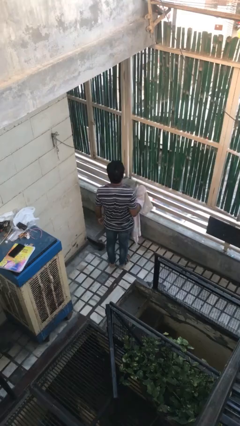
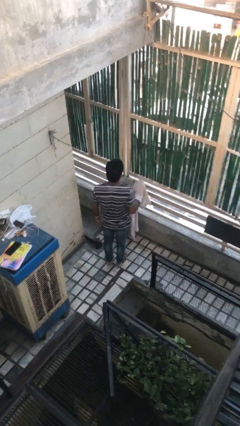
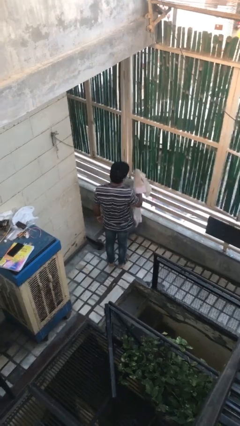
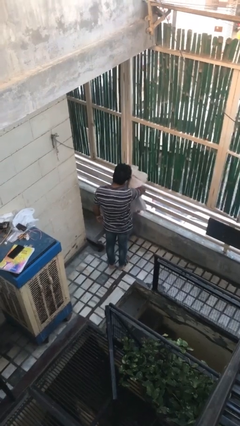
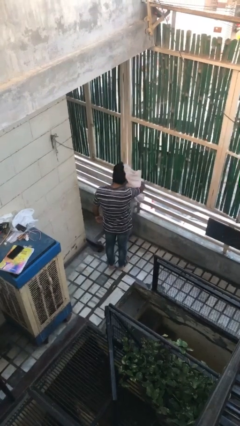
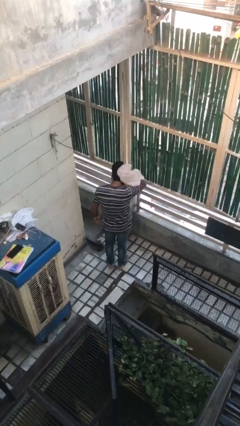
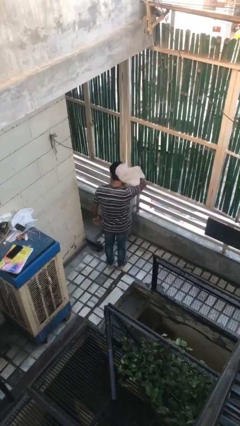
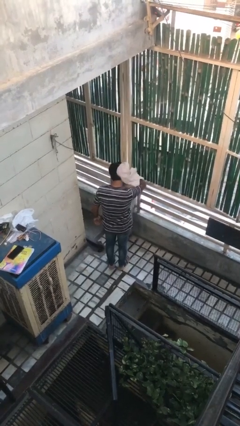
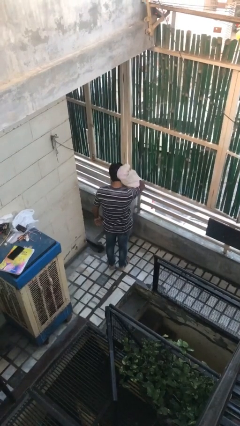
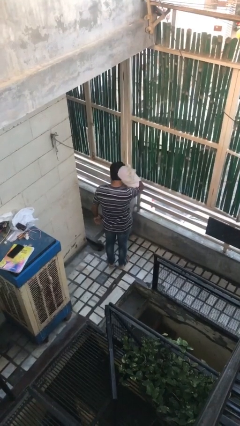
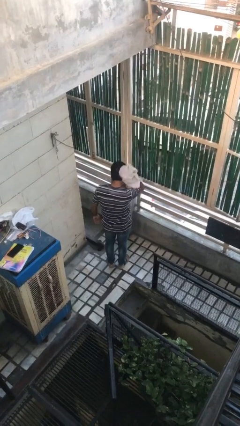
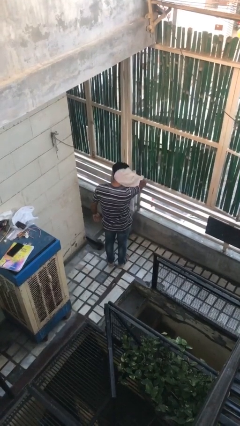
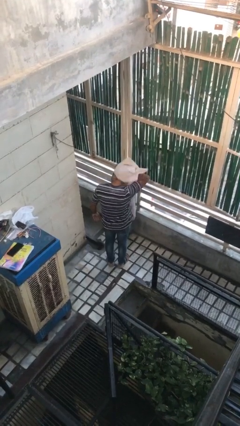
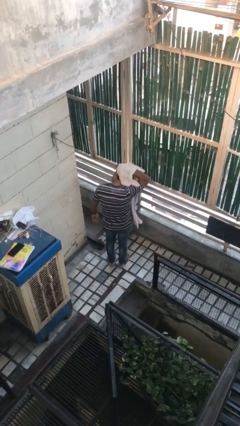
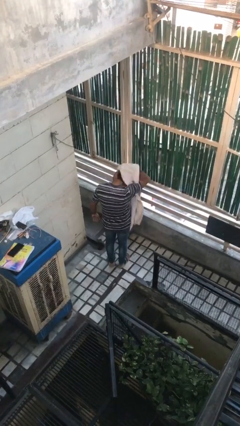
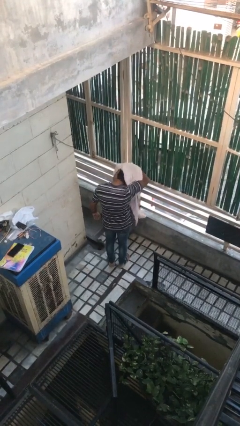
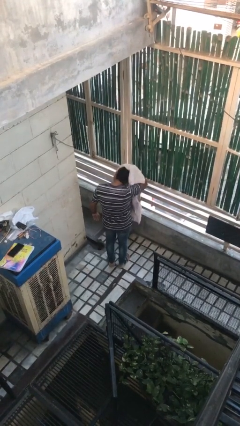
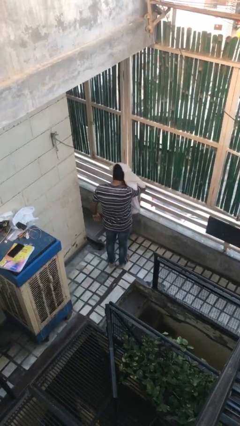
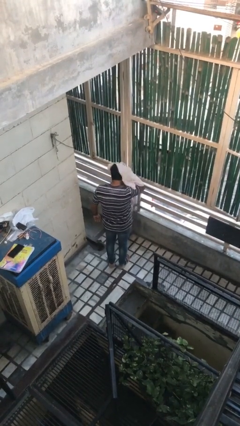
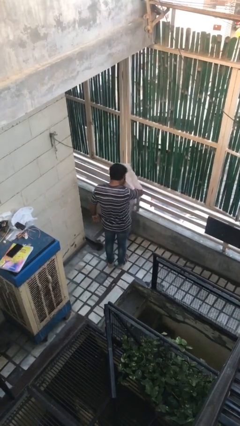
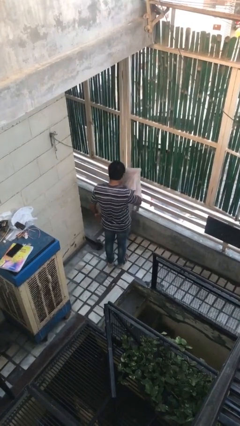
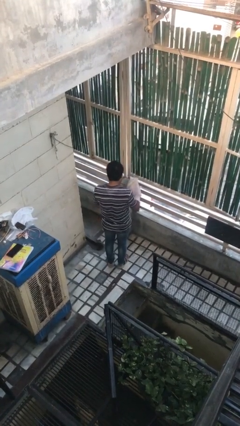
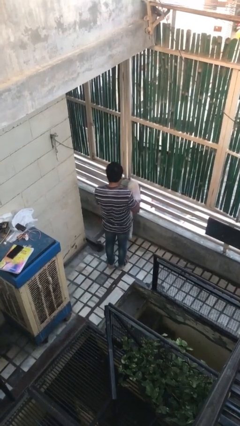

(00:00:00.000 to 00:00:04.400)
person dries hair with towel

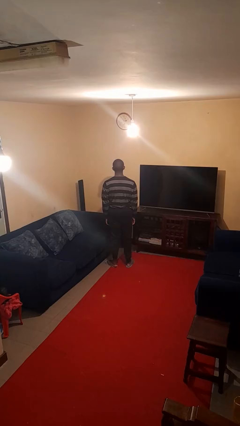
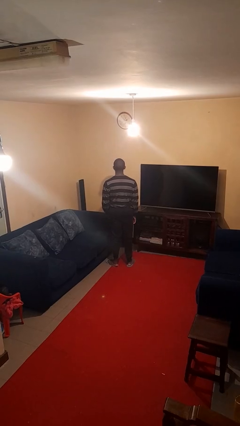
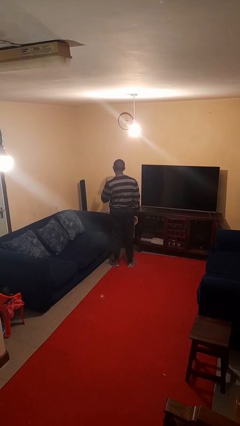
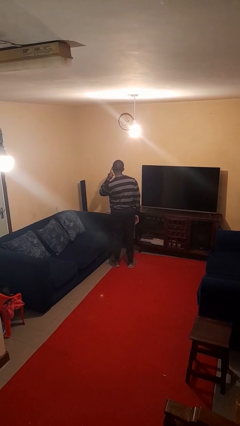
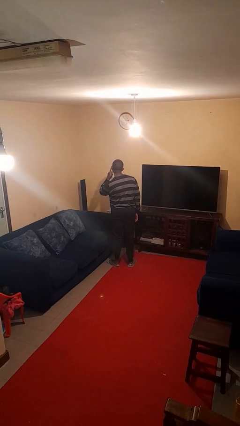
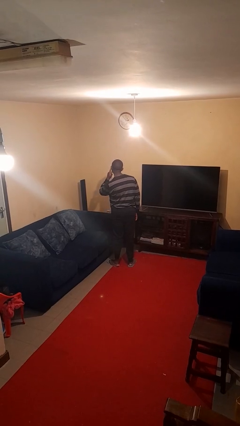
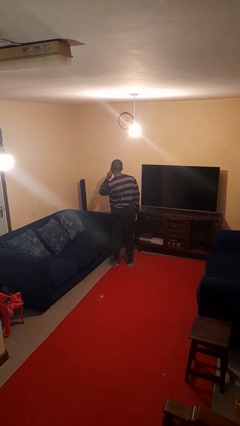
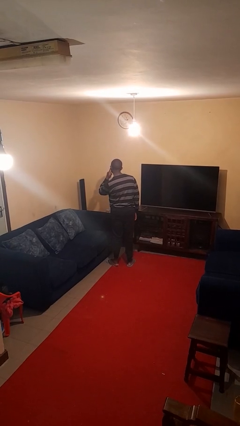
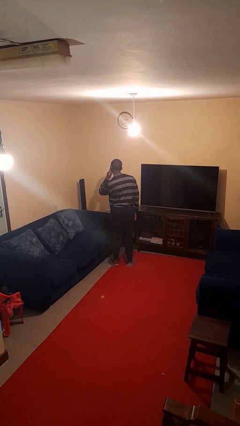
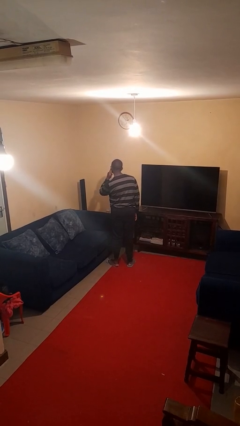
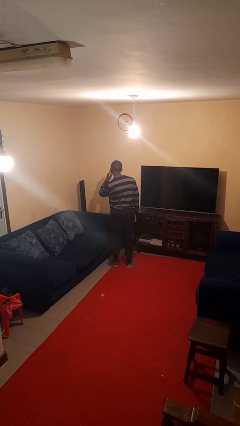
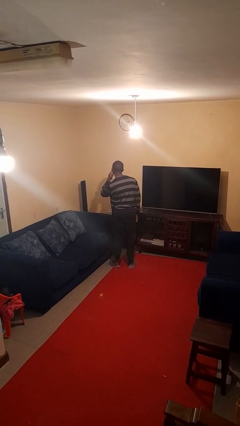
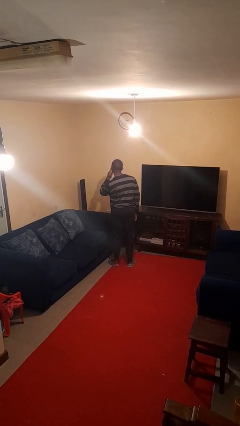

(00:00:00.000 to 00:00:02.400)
person gestures listen closely

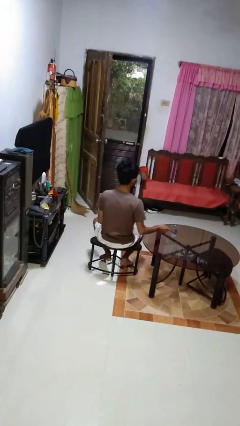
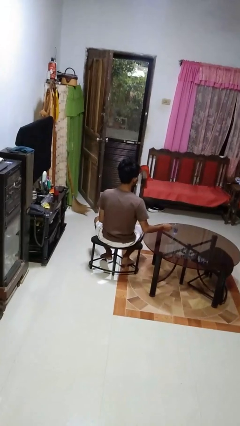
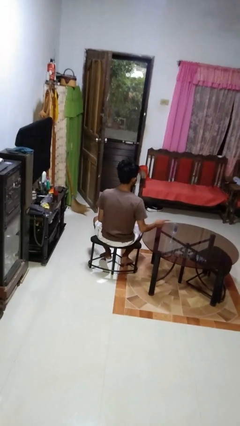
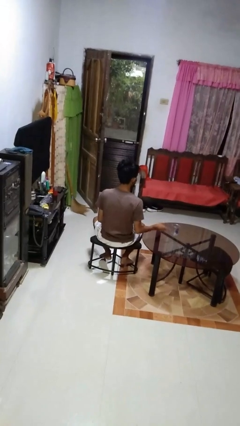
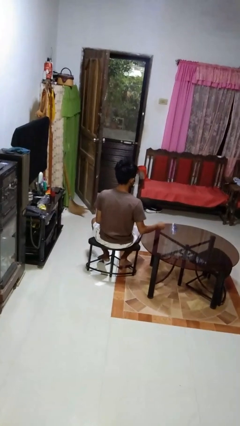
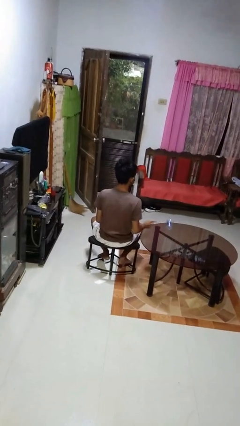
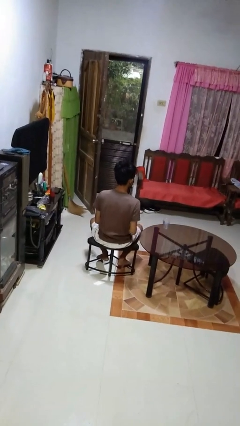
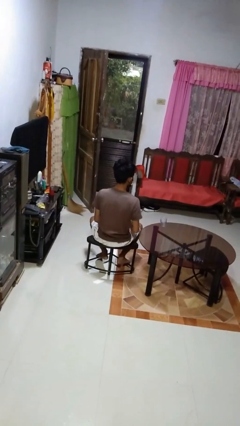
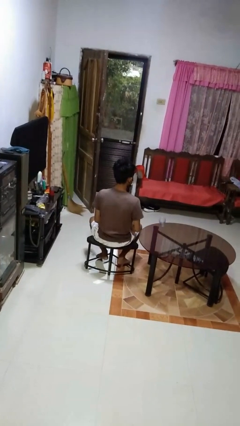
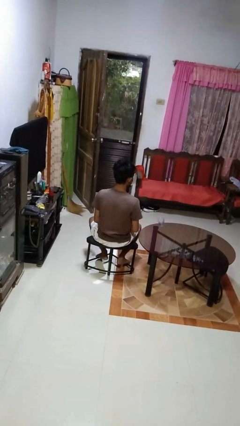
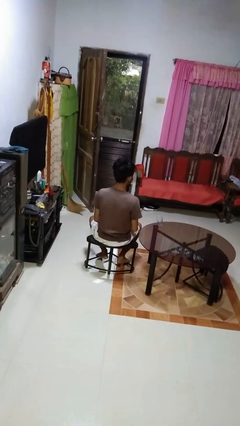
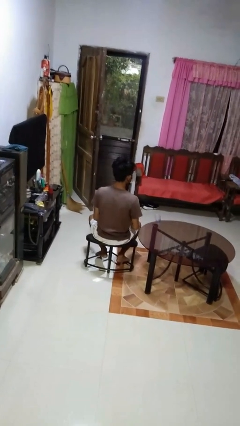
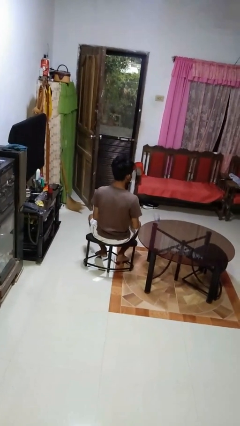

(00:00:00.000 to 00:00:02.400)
person knocks over glass

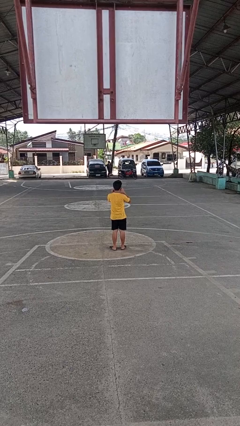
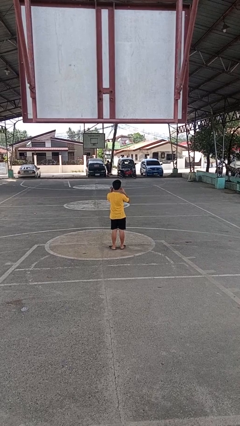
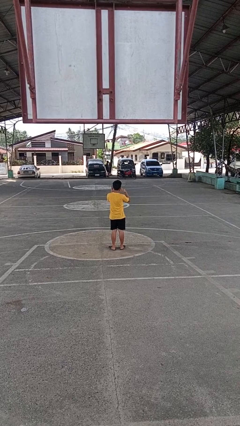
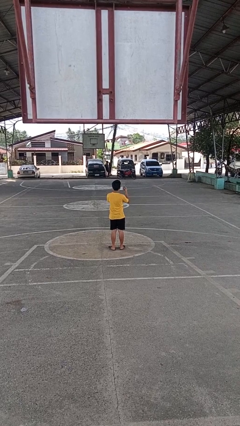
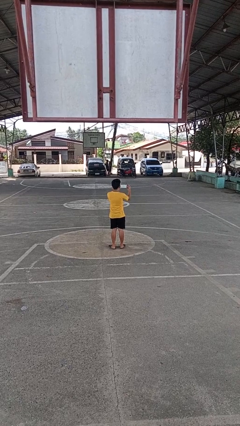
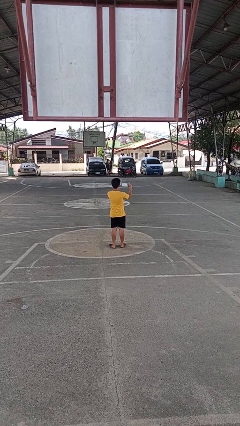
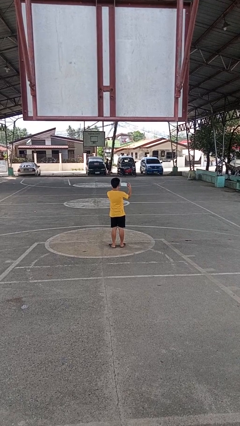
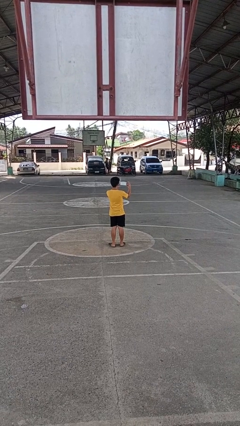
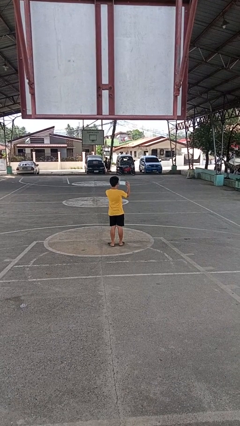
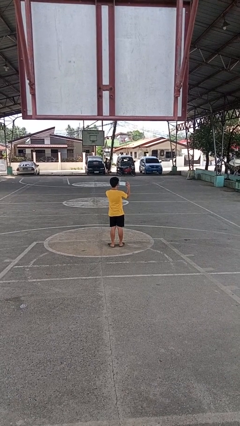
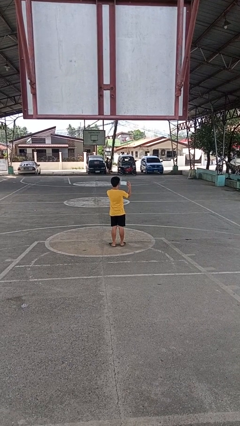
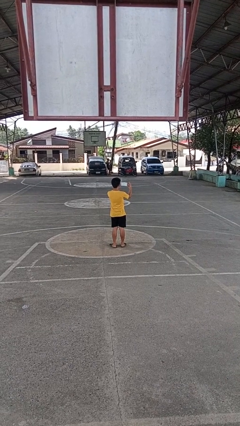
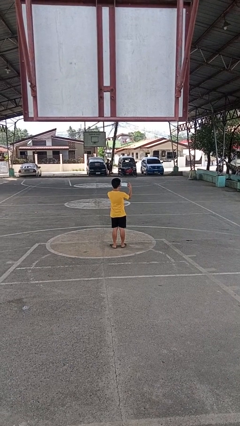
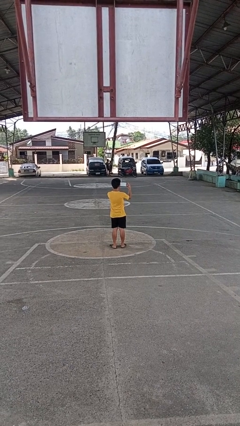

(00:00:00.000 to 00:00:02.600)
person takes off facemask

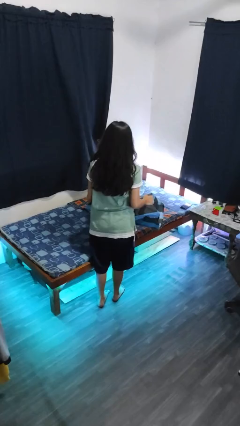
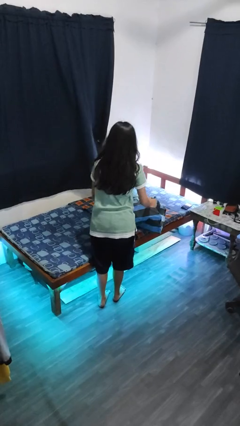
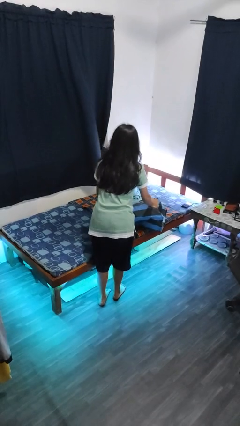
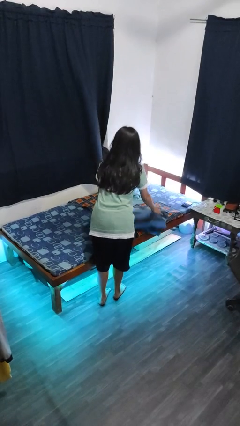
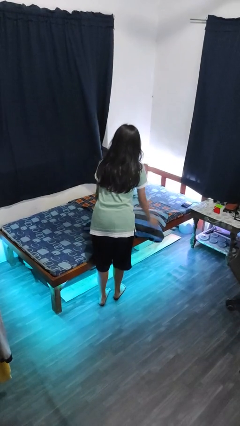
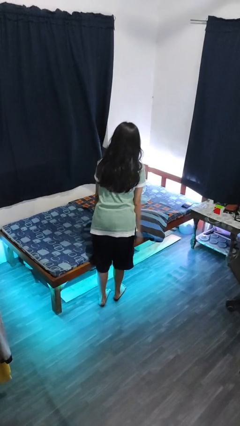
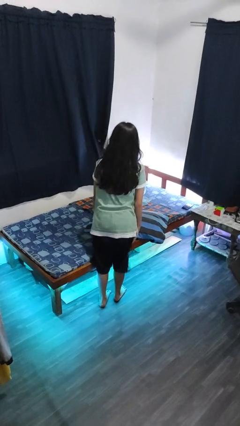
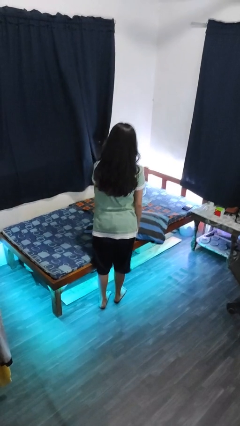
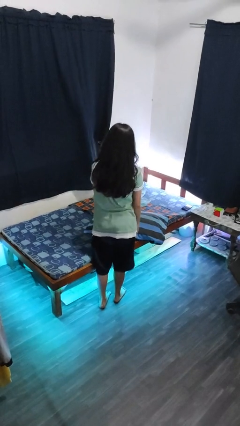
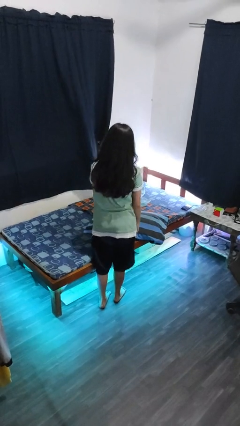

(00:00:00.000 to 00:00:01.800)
person puts down object on bed

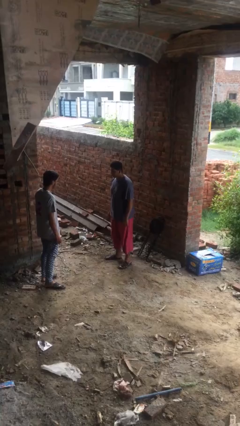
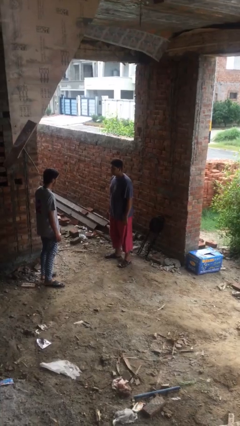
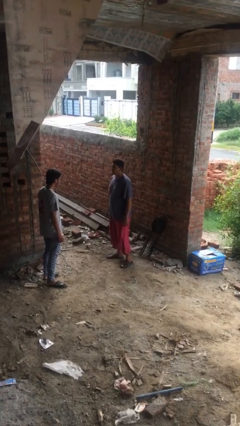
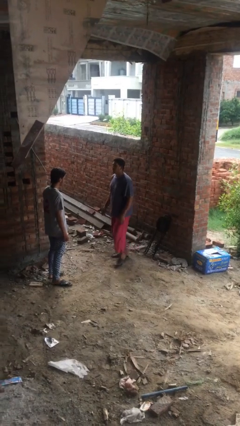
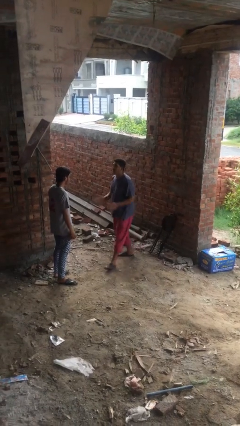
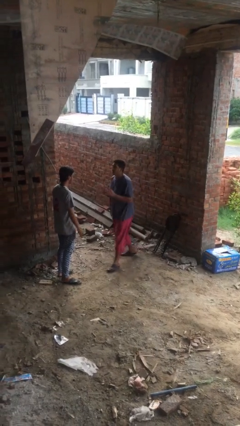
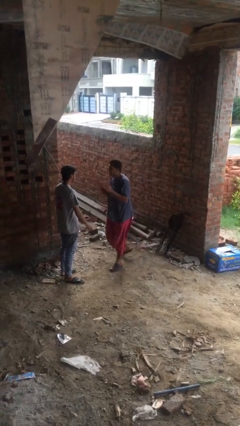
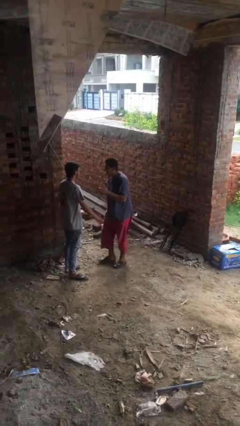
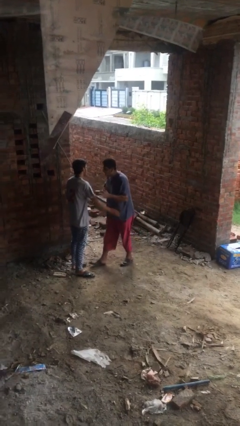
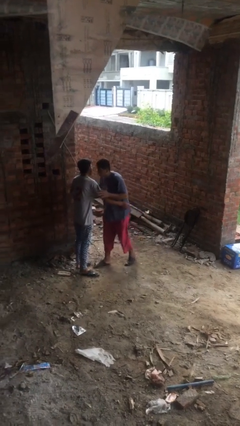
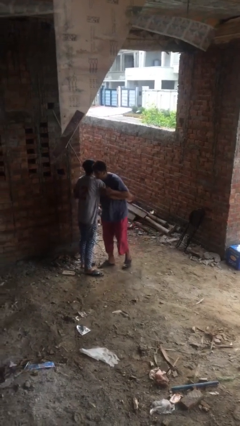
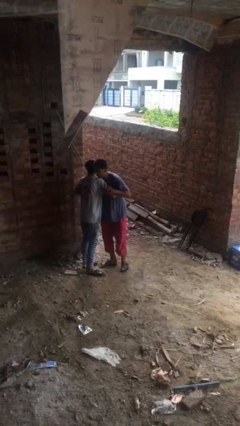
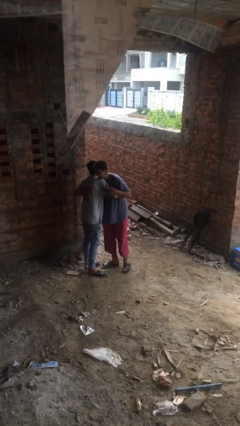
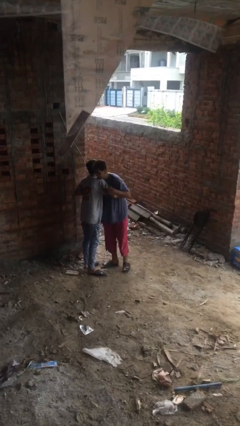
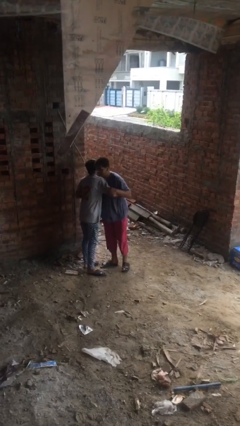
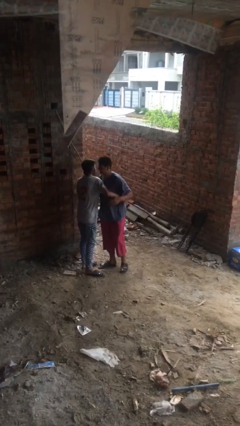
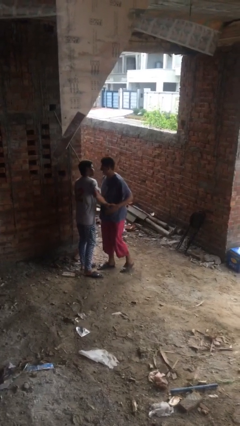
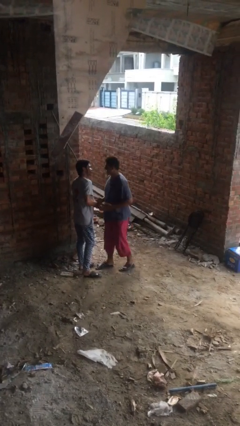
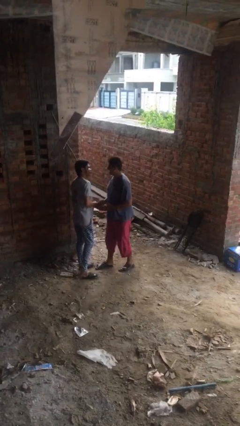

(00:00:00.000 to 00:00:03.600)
person embraces person

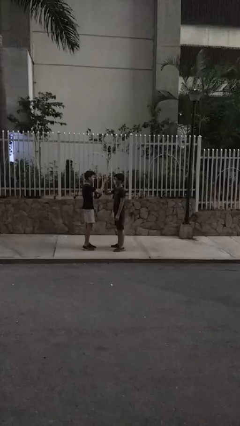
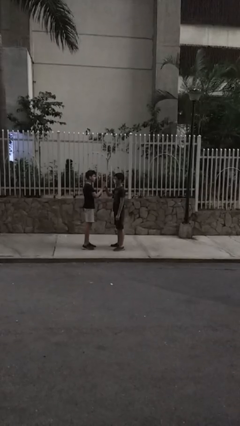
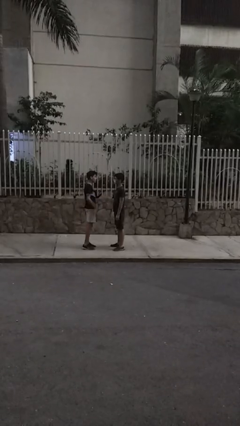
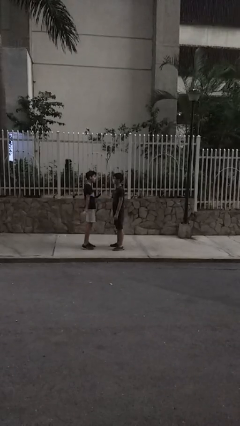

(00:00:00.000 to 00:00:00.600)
person highfives hand
